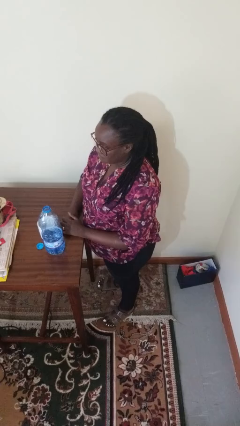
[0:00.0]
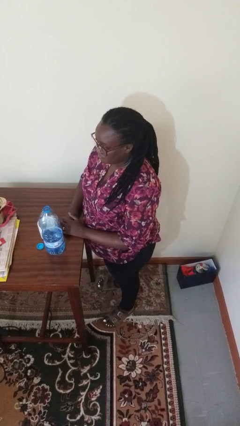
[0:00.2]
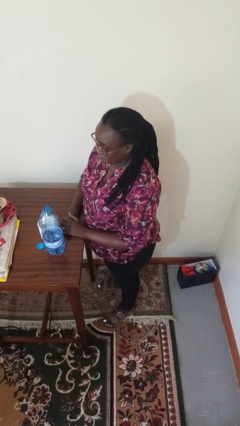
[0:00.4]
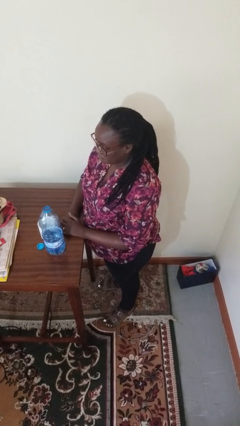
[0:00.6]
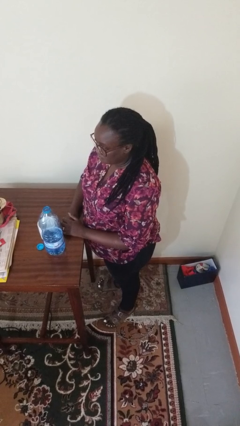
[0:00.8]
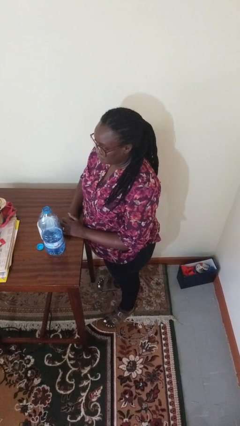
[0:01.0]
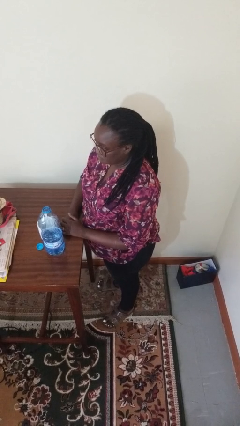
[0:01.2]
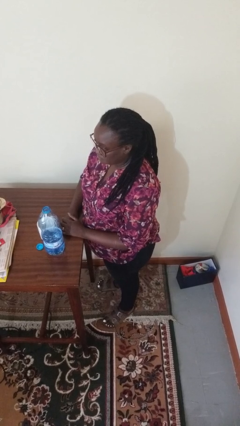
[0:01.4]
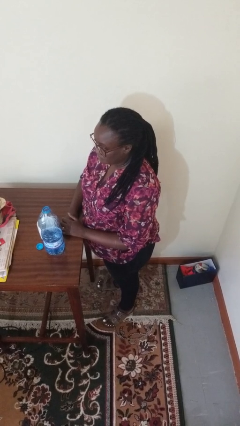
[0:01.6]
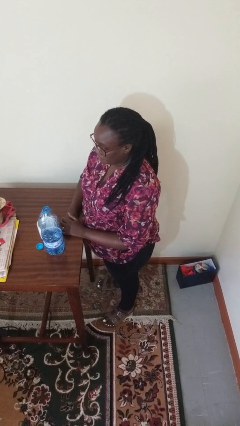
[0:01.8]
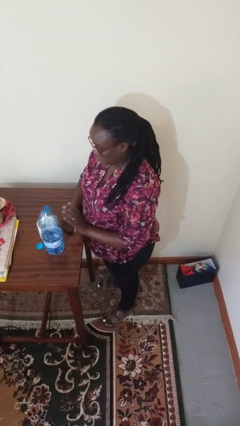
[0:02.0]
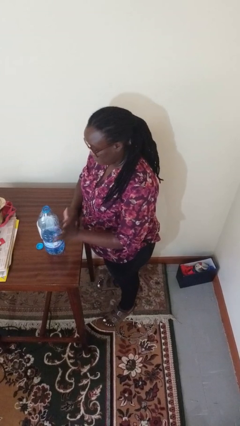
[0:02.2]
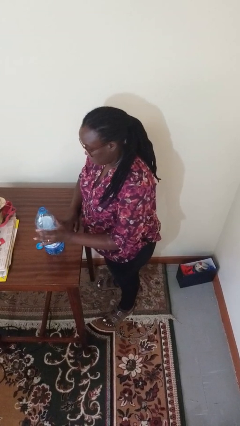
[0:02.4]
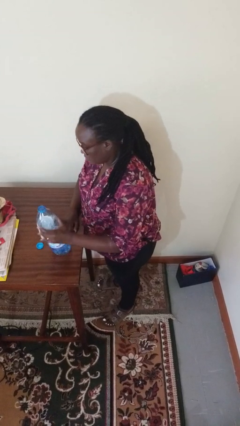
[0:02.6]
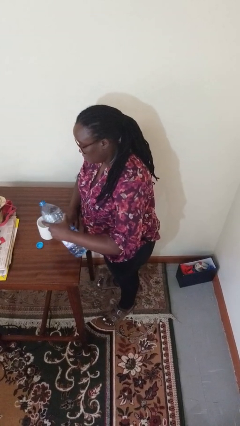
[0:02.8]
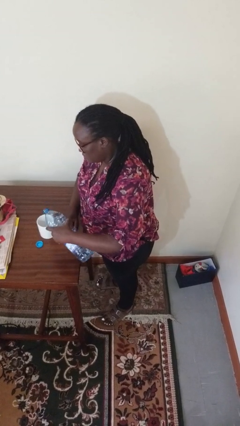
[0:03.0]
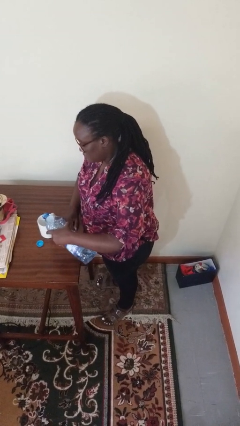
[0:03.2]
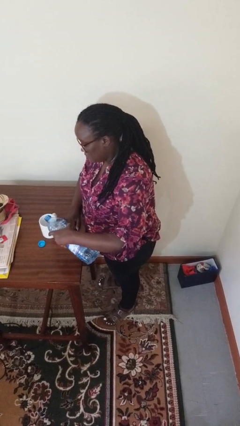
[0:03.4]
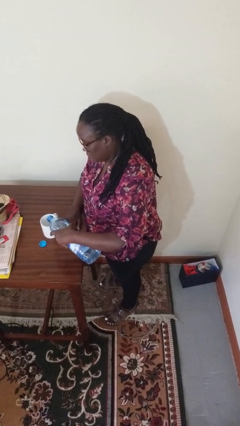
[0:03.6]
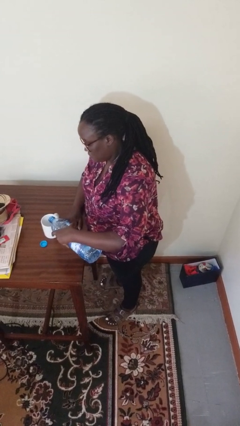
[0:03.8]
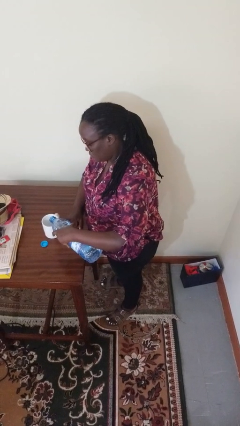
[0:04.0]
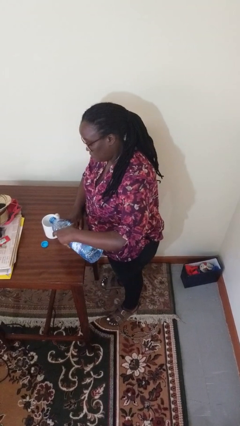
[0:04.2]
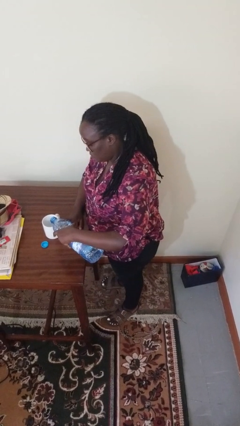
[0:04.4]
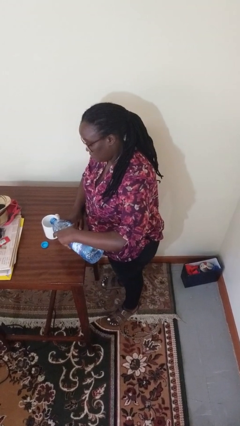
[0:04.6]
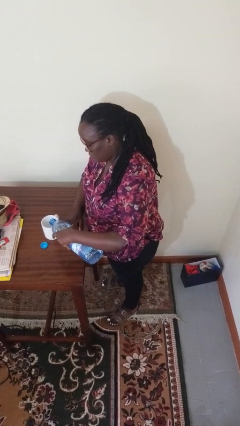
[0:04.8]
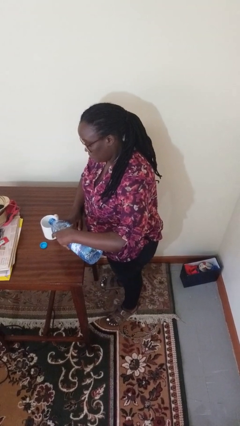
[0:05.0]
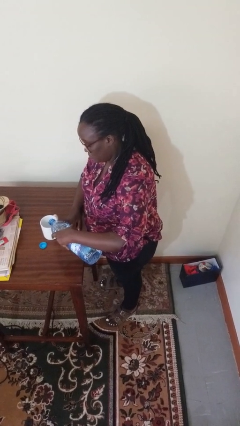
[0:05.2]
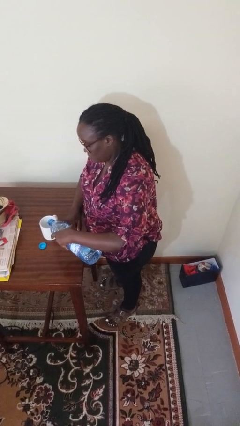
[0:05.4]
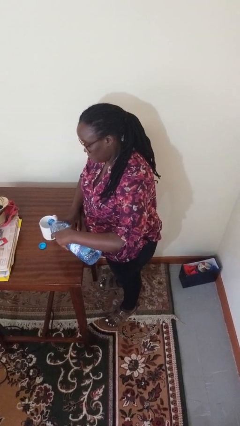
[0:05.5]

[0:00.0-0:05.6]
person pours liquid into cup

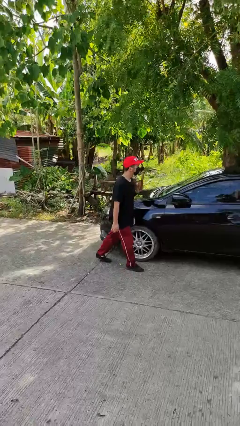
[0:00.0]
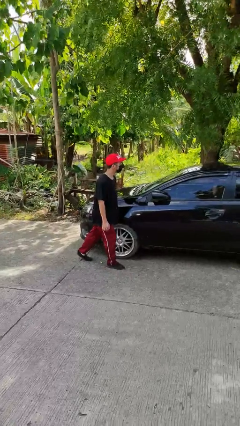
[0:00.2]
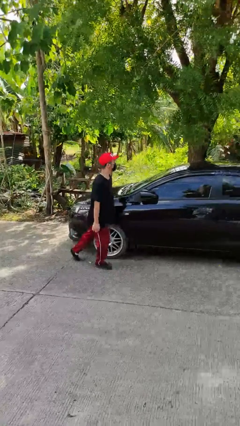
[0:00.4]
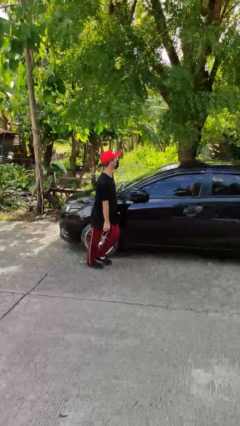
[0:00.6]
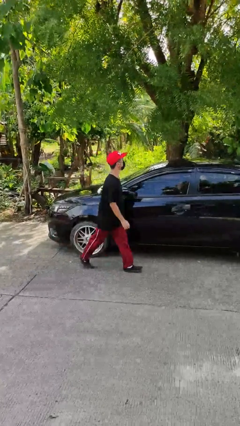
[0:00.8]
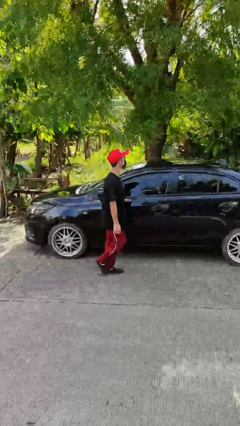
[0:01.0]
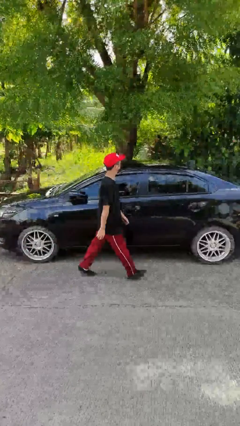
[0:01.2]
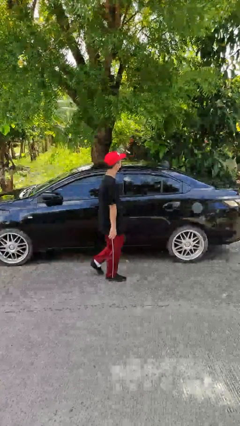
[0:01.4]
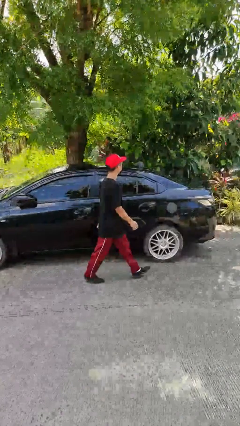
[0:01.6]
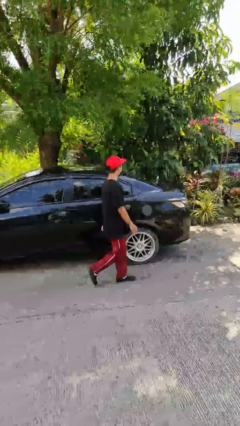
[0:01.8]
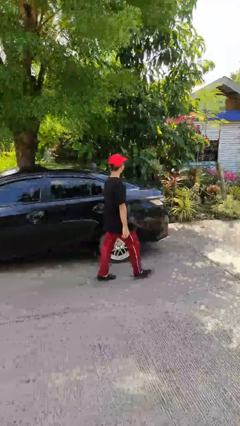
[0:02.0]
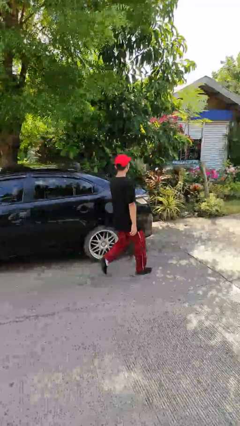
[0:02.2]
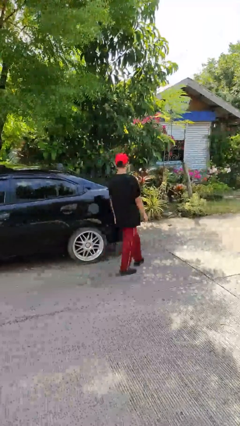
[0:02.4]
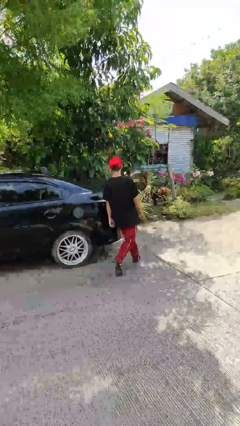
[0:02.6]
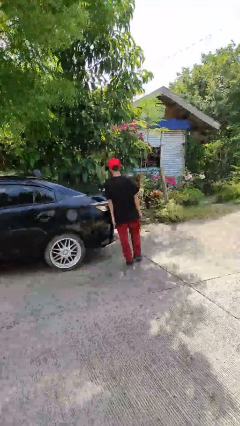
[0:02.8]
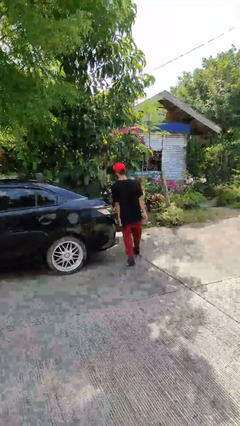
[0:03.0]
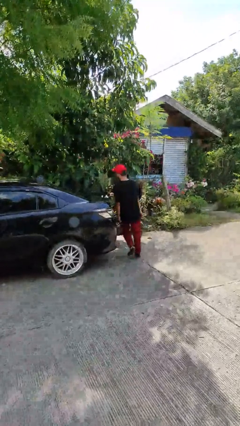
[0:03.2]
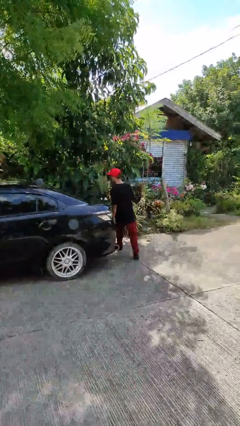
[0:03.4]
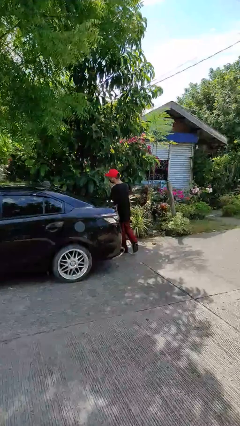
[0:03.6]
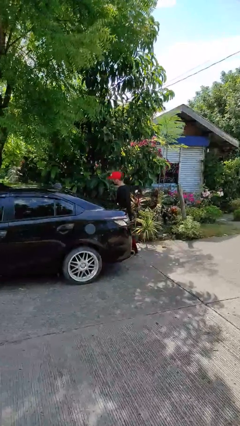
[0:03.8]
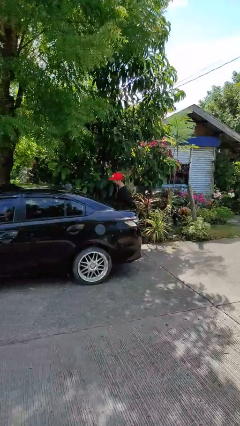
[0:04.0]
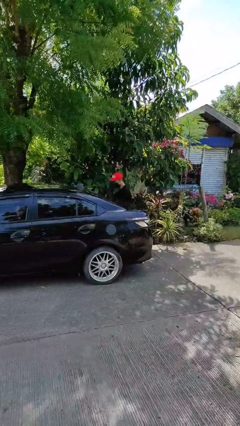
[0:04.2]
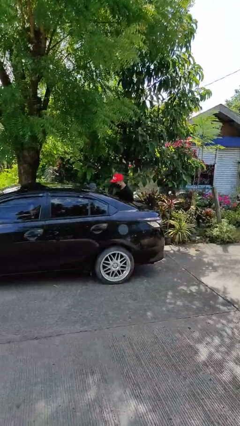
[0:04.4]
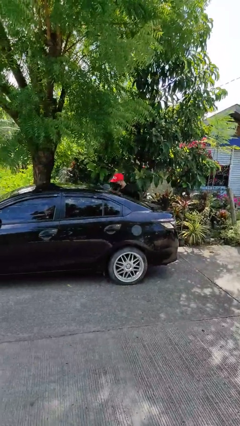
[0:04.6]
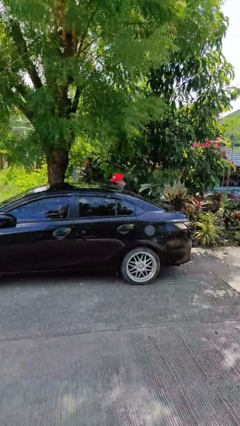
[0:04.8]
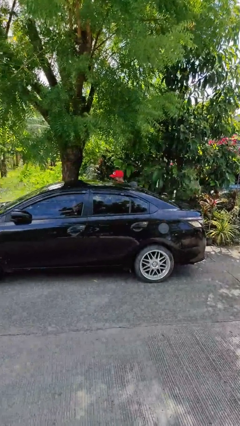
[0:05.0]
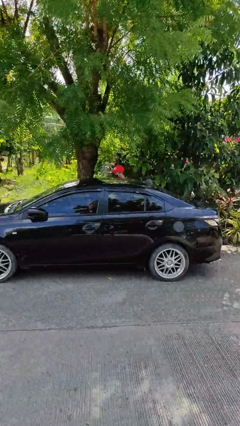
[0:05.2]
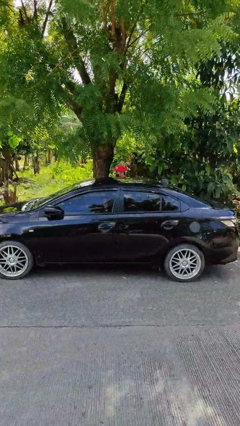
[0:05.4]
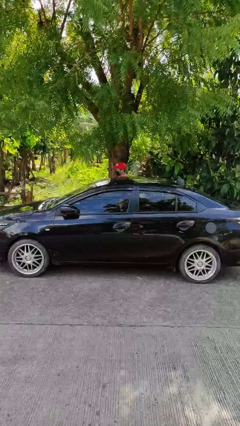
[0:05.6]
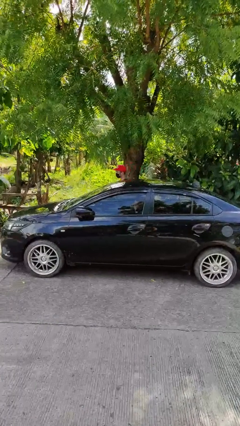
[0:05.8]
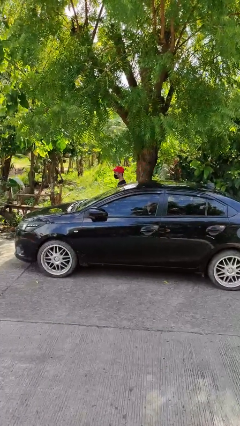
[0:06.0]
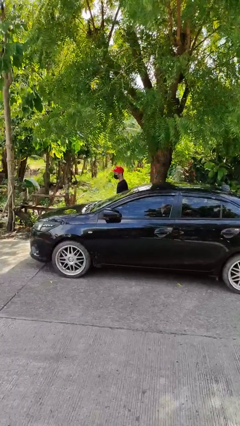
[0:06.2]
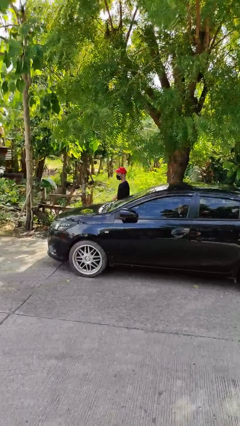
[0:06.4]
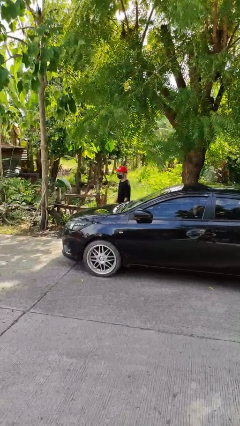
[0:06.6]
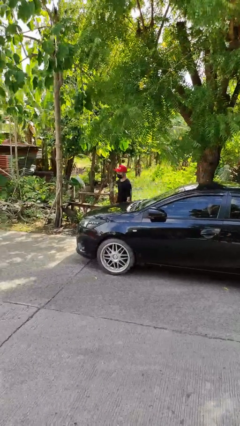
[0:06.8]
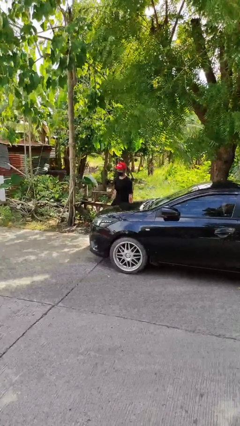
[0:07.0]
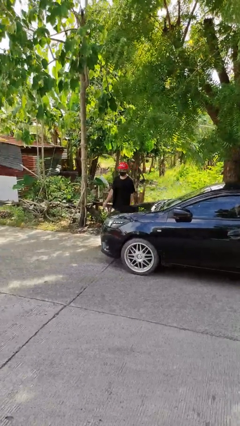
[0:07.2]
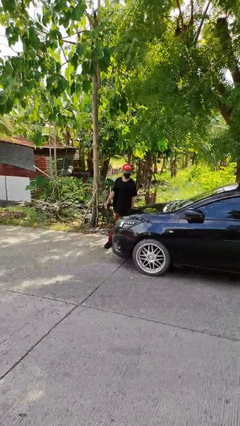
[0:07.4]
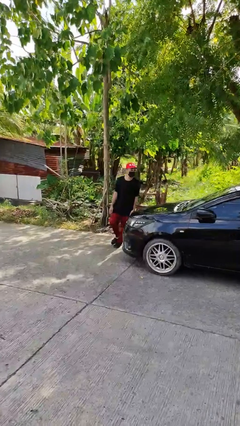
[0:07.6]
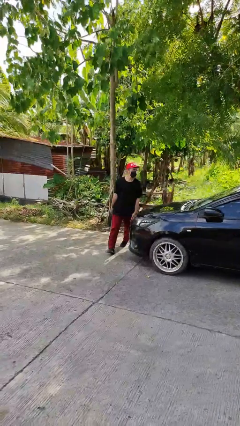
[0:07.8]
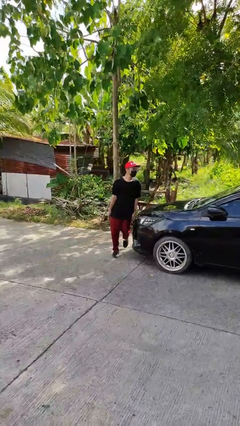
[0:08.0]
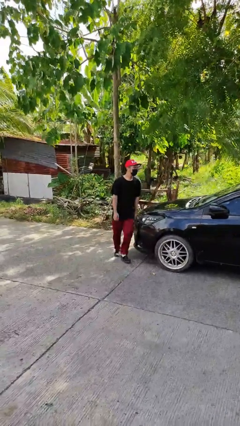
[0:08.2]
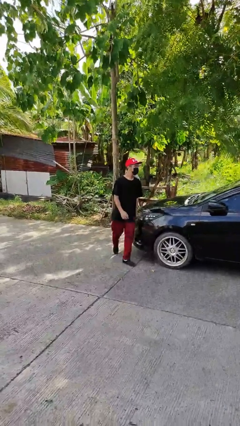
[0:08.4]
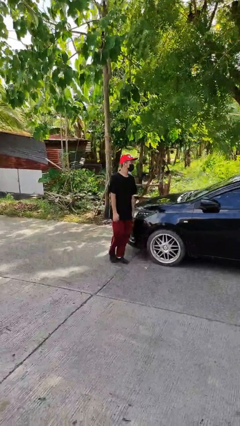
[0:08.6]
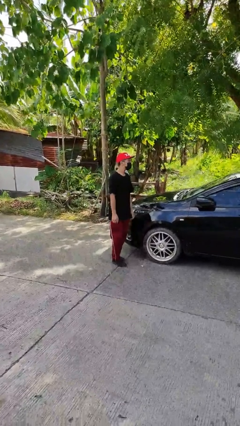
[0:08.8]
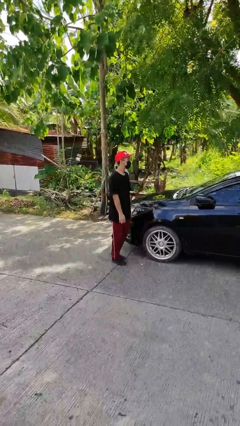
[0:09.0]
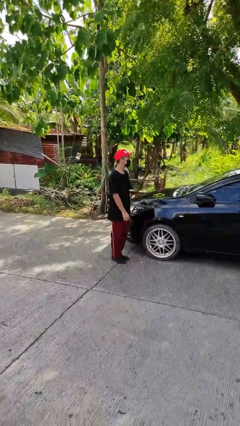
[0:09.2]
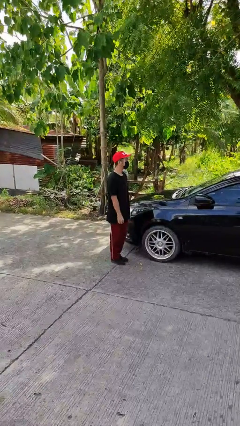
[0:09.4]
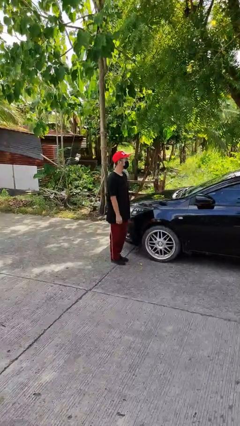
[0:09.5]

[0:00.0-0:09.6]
person walks around car

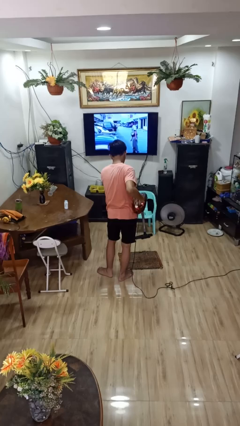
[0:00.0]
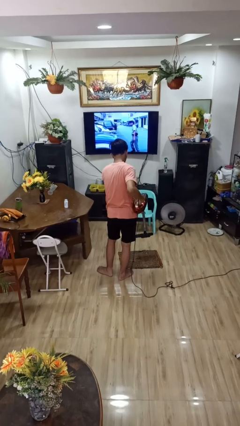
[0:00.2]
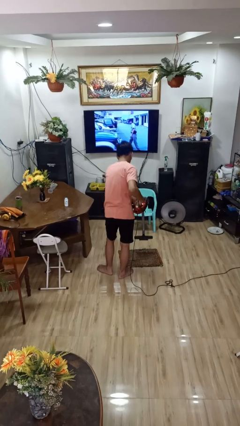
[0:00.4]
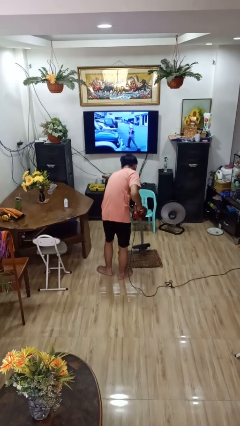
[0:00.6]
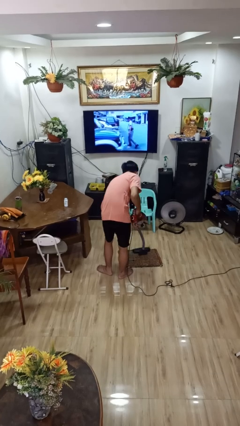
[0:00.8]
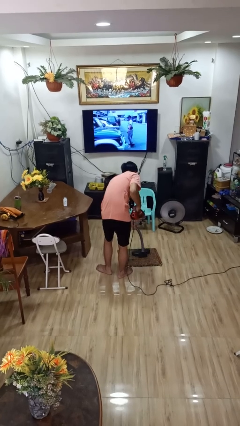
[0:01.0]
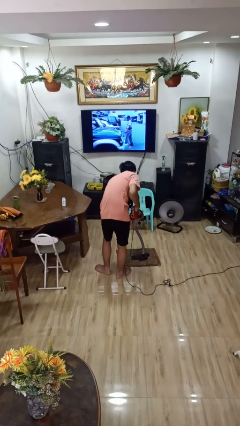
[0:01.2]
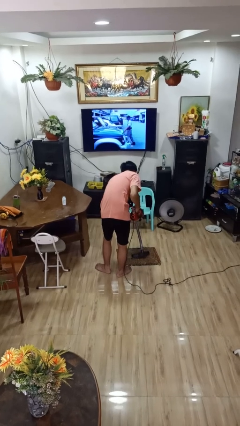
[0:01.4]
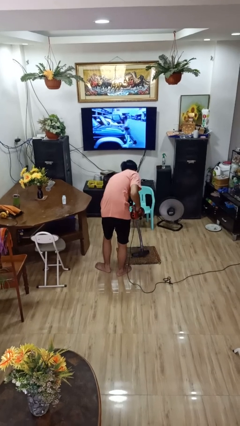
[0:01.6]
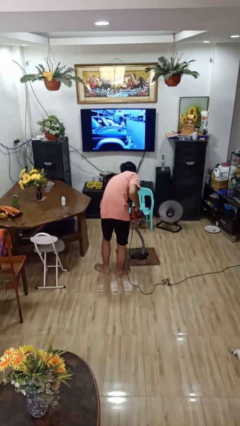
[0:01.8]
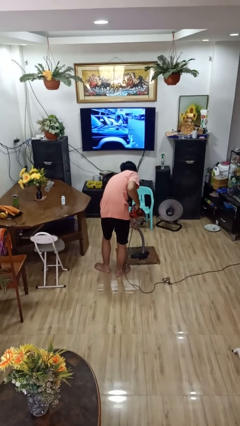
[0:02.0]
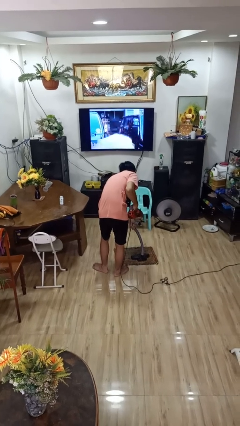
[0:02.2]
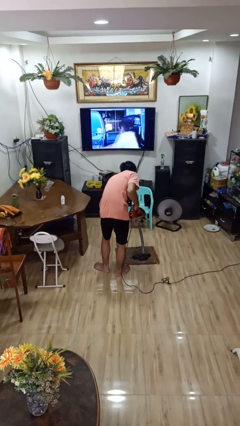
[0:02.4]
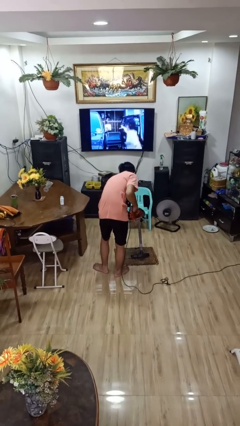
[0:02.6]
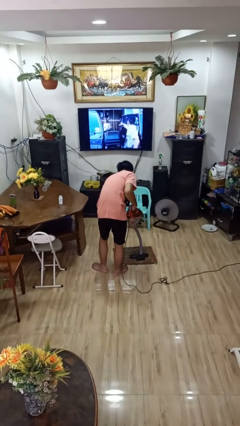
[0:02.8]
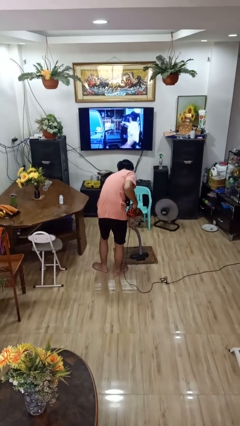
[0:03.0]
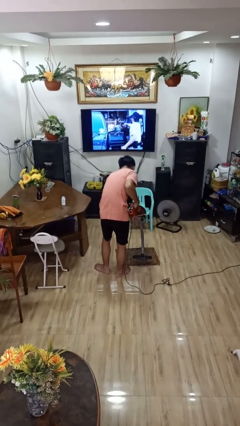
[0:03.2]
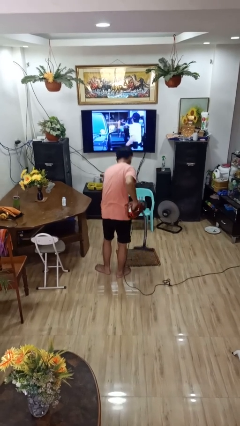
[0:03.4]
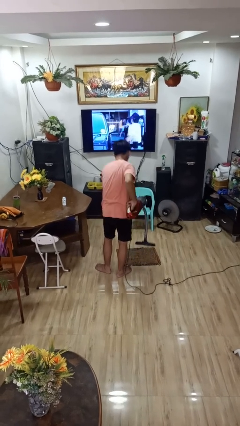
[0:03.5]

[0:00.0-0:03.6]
person vacuums carpet
